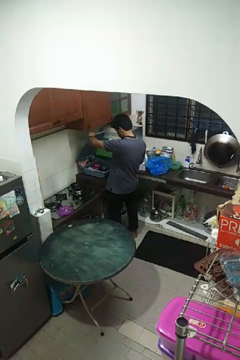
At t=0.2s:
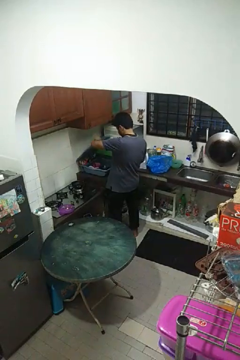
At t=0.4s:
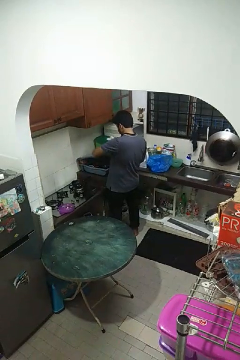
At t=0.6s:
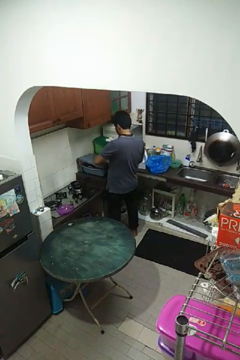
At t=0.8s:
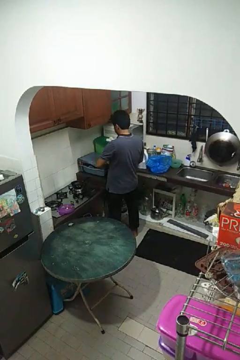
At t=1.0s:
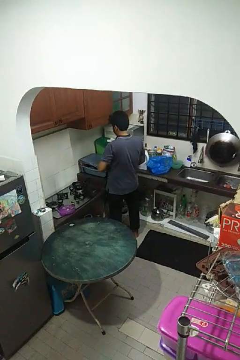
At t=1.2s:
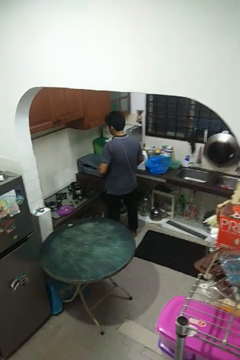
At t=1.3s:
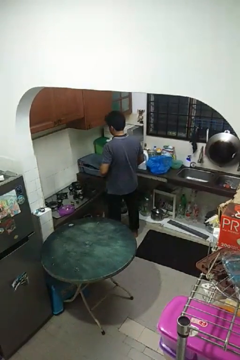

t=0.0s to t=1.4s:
person closes dishwasher

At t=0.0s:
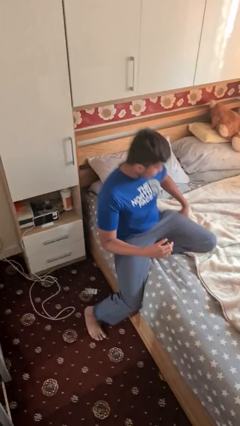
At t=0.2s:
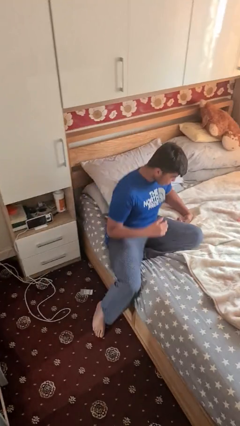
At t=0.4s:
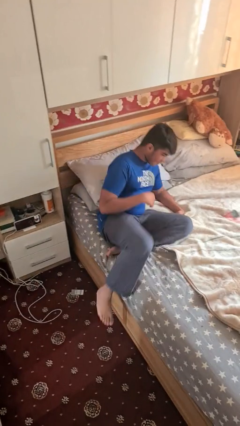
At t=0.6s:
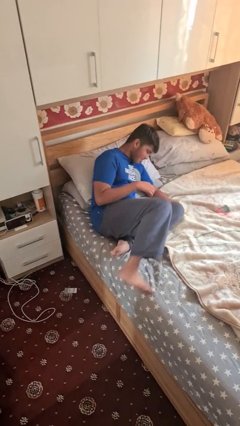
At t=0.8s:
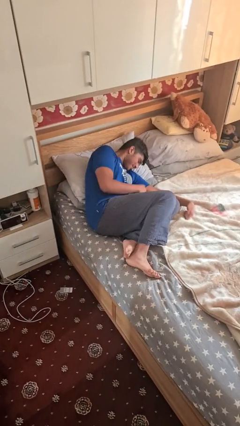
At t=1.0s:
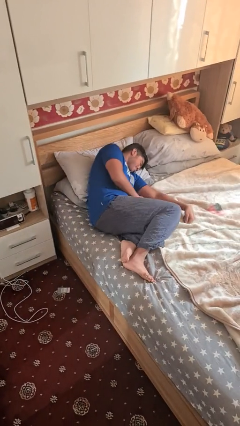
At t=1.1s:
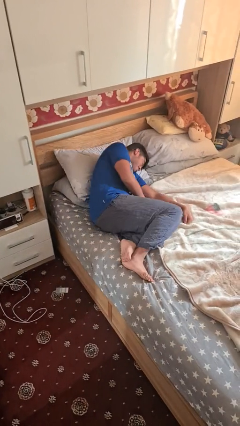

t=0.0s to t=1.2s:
person lies down on bed

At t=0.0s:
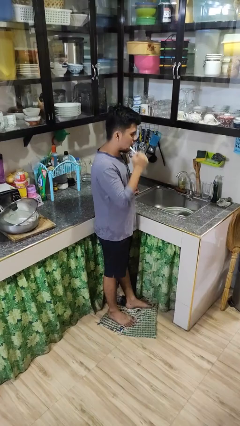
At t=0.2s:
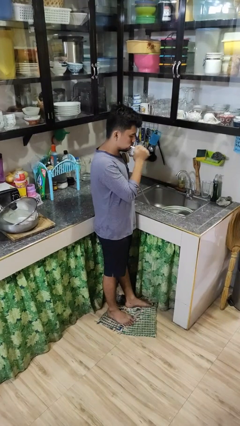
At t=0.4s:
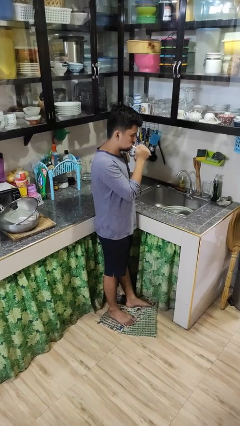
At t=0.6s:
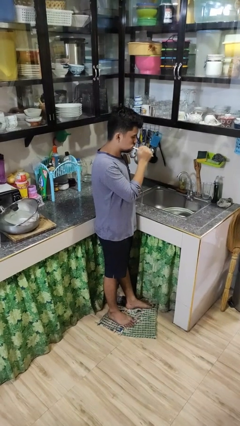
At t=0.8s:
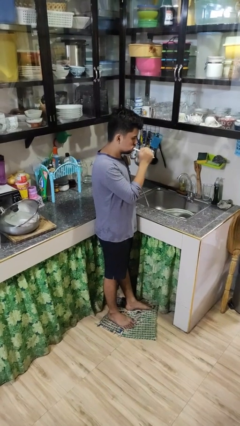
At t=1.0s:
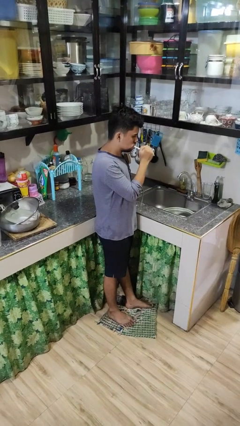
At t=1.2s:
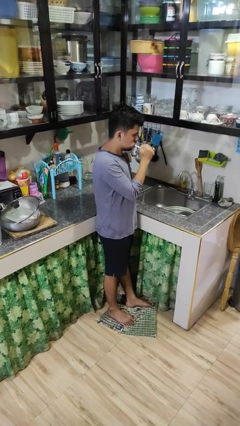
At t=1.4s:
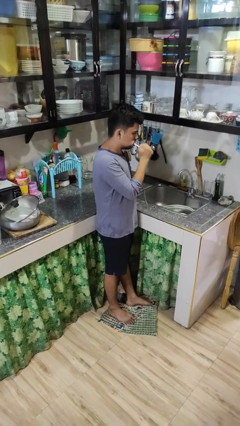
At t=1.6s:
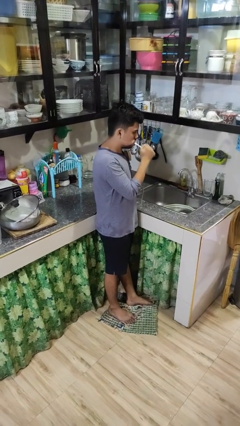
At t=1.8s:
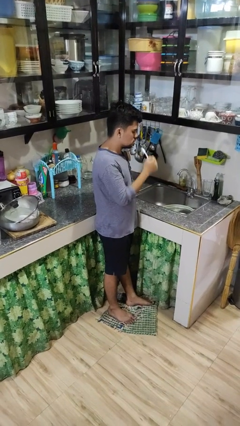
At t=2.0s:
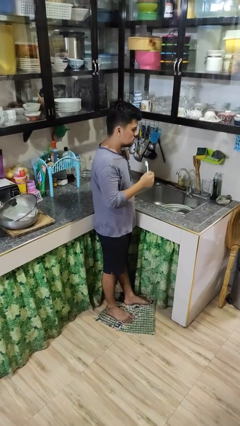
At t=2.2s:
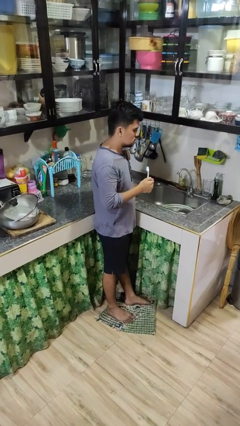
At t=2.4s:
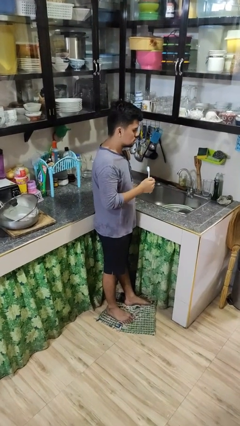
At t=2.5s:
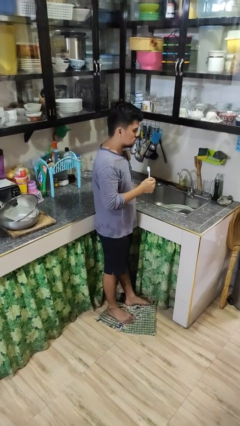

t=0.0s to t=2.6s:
person brushes teeth

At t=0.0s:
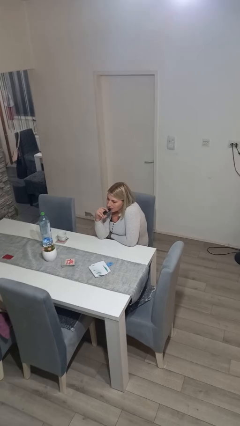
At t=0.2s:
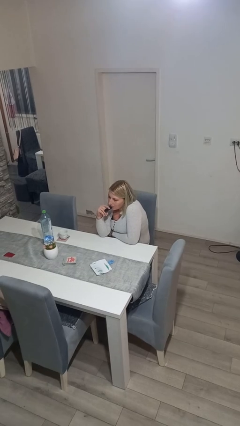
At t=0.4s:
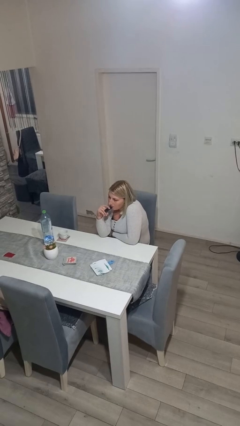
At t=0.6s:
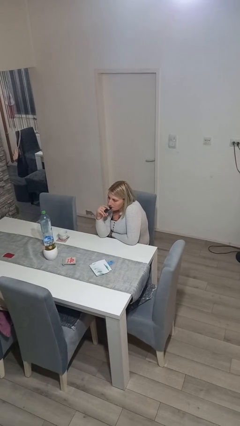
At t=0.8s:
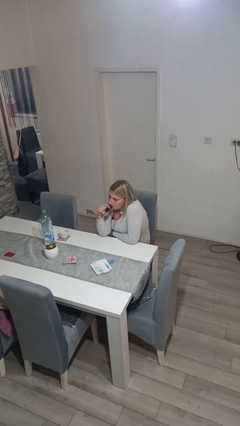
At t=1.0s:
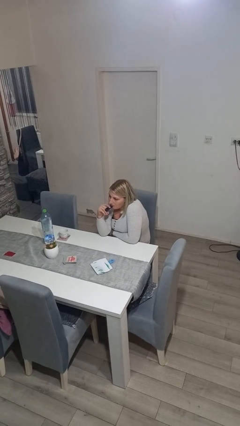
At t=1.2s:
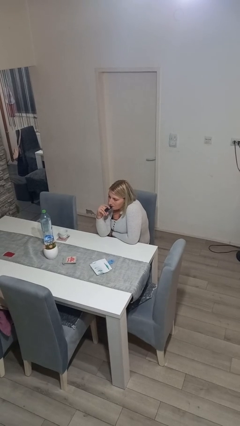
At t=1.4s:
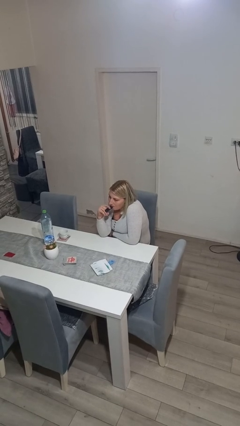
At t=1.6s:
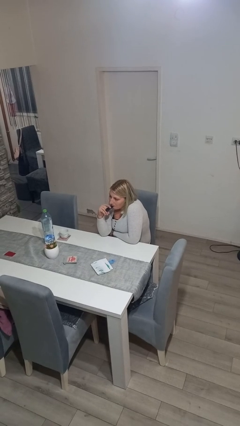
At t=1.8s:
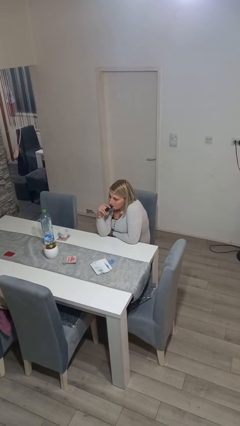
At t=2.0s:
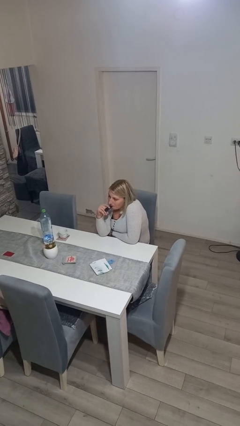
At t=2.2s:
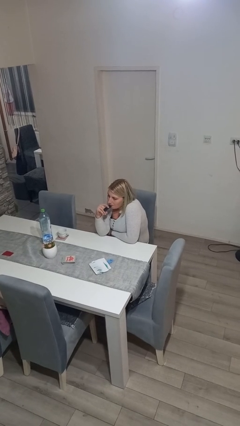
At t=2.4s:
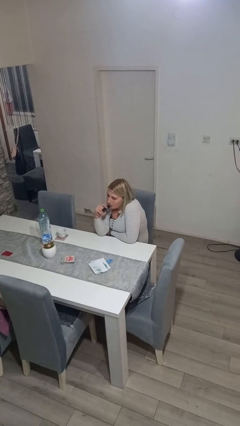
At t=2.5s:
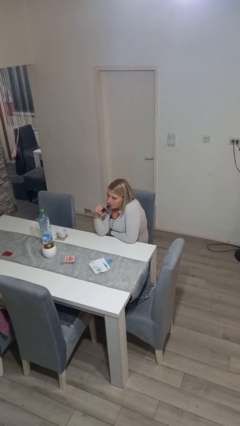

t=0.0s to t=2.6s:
person vapes

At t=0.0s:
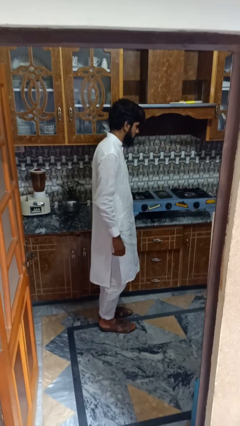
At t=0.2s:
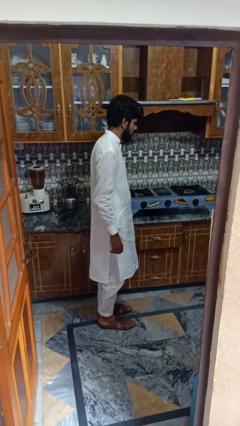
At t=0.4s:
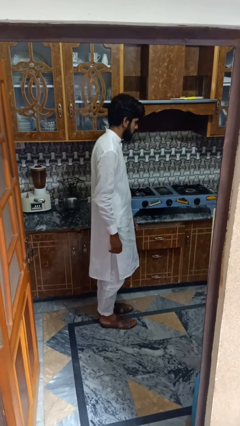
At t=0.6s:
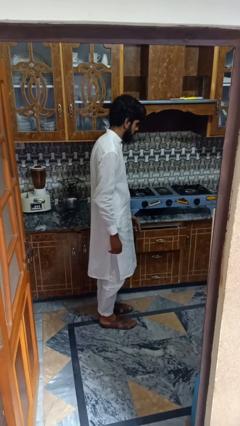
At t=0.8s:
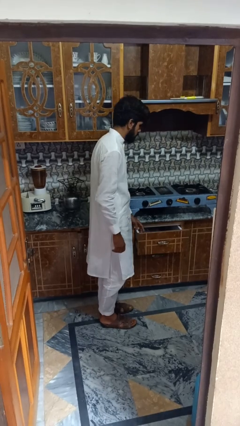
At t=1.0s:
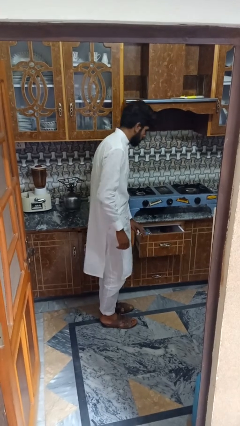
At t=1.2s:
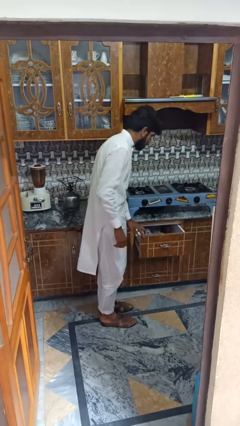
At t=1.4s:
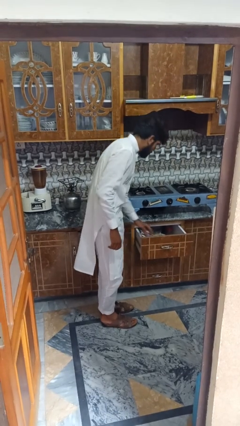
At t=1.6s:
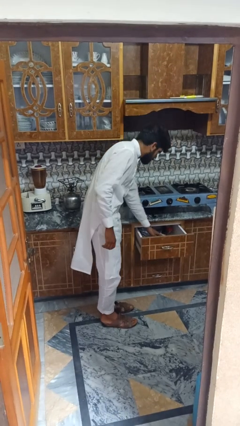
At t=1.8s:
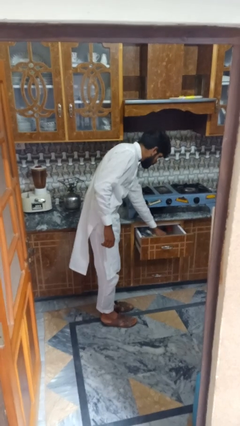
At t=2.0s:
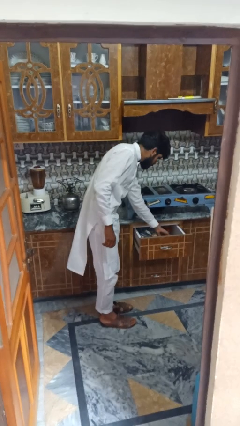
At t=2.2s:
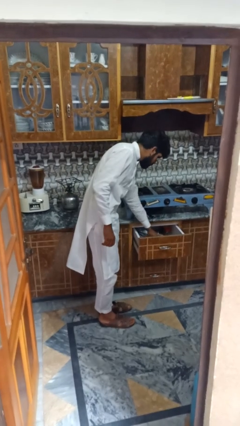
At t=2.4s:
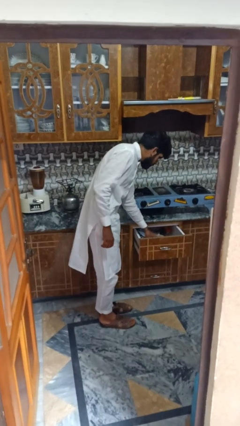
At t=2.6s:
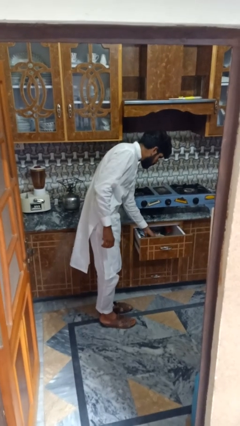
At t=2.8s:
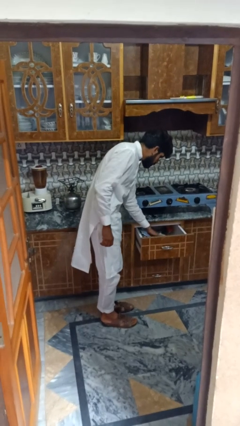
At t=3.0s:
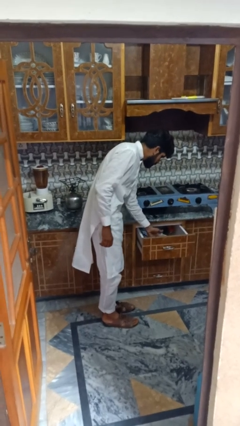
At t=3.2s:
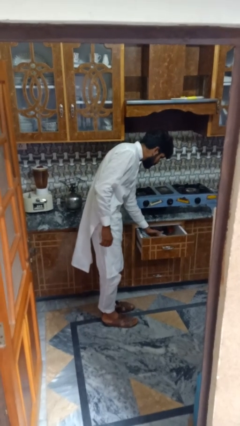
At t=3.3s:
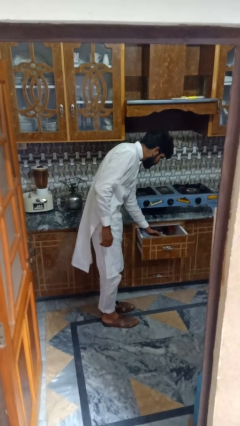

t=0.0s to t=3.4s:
person searches in kitchen drawer

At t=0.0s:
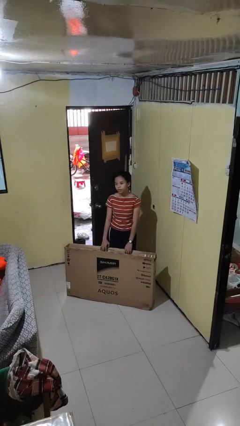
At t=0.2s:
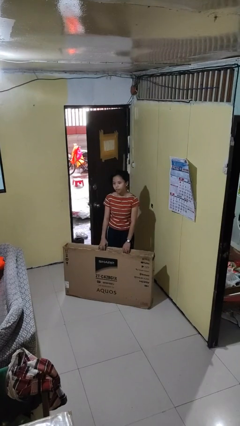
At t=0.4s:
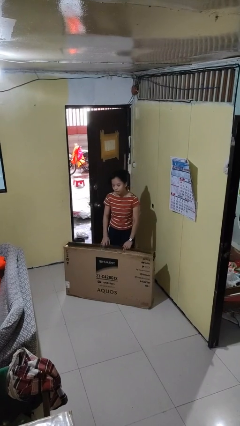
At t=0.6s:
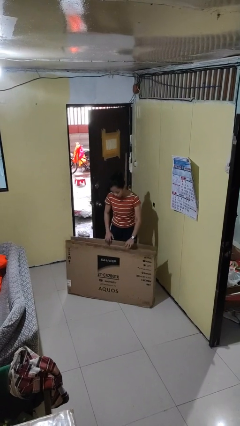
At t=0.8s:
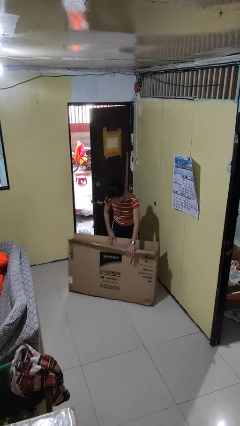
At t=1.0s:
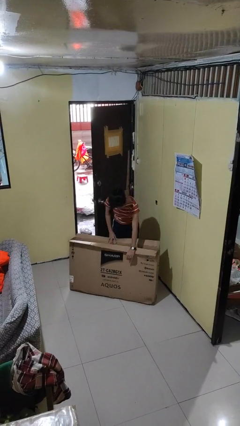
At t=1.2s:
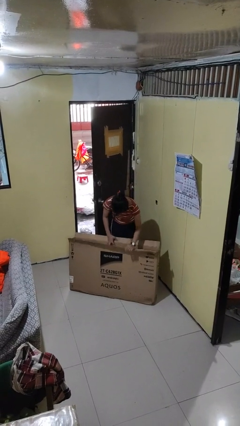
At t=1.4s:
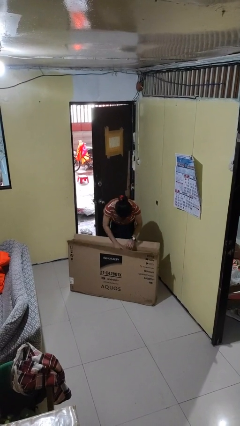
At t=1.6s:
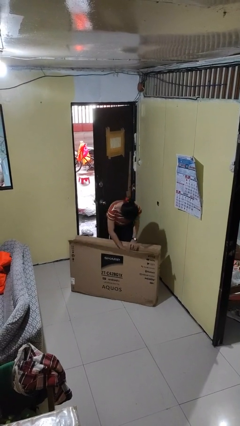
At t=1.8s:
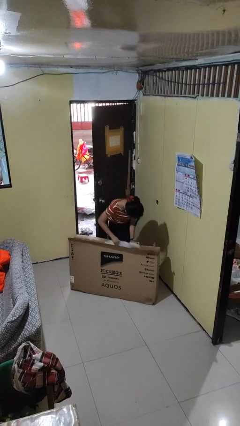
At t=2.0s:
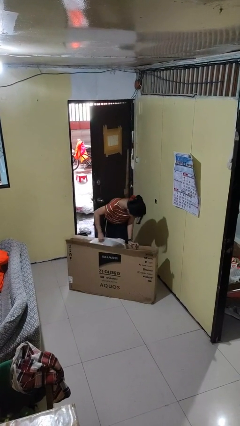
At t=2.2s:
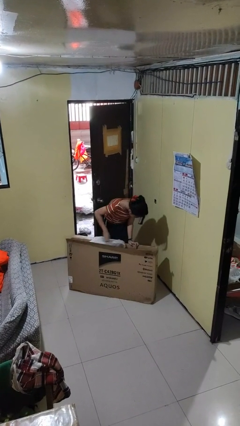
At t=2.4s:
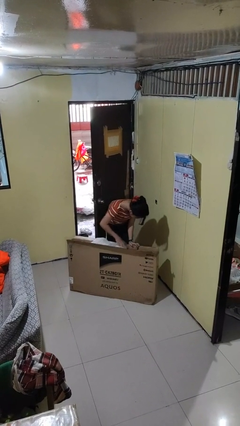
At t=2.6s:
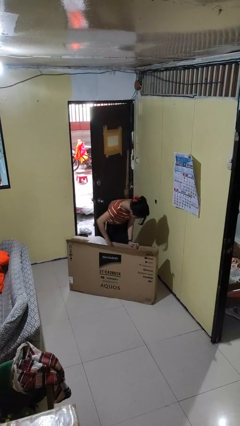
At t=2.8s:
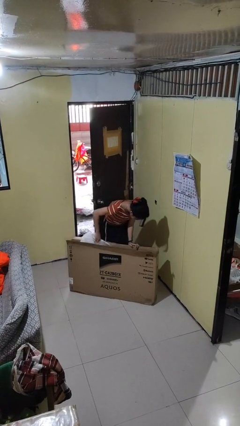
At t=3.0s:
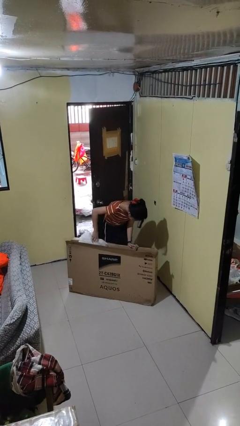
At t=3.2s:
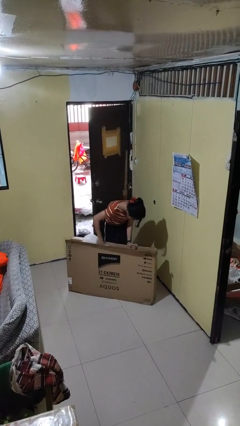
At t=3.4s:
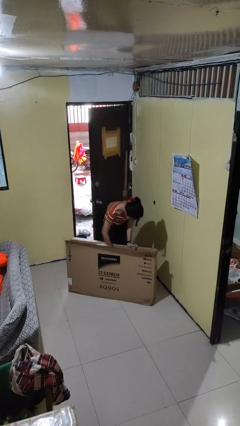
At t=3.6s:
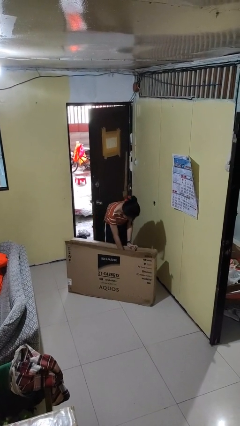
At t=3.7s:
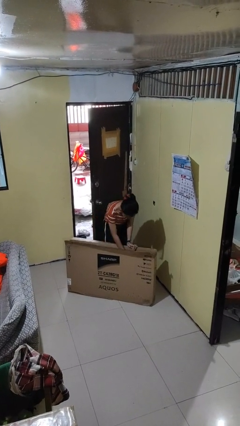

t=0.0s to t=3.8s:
person searches in box

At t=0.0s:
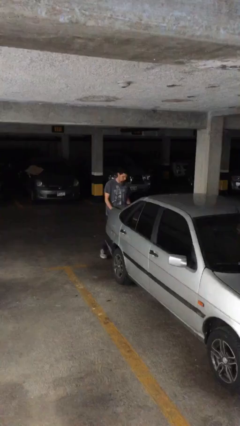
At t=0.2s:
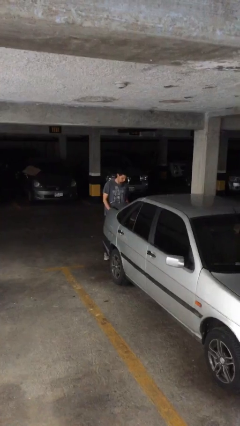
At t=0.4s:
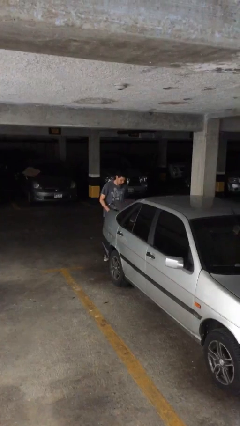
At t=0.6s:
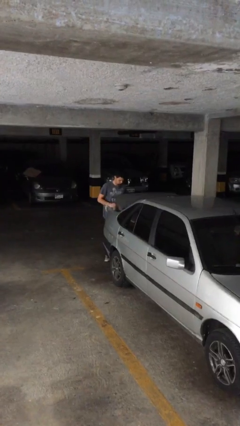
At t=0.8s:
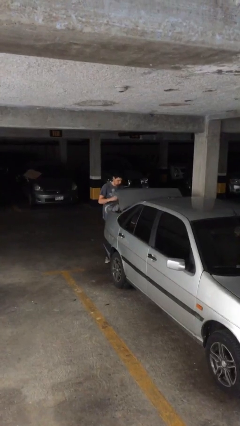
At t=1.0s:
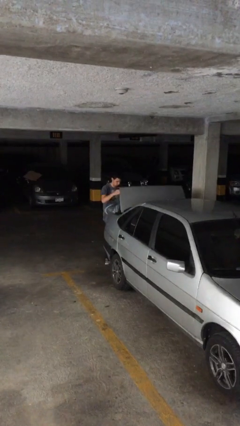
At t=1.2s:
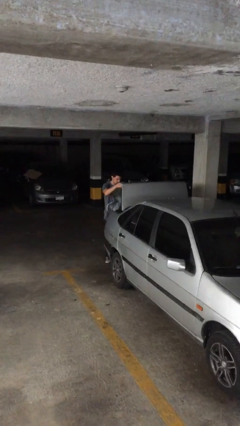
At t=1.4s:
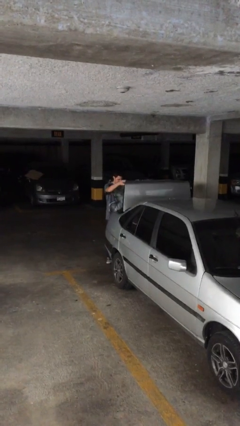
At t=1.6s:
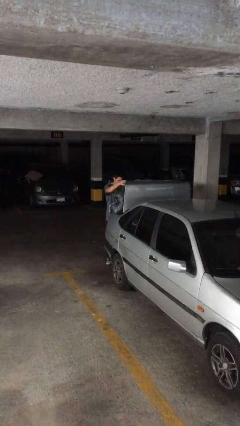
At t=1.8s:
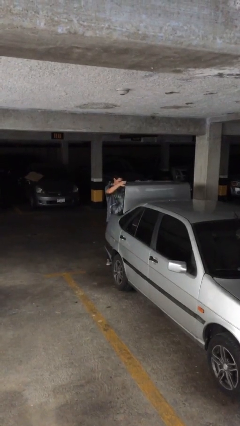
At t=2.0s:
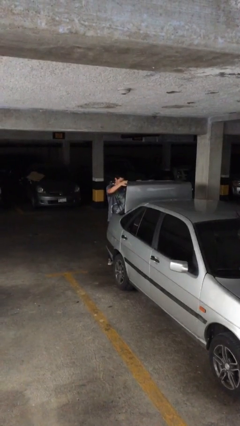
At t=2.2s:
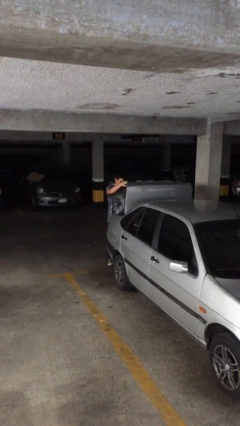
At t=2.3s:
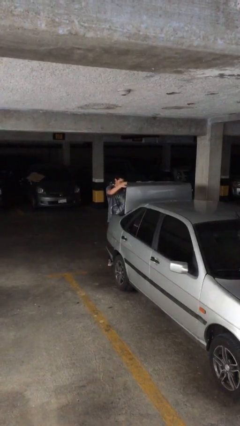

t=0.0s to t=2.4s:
person opens car trunk
